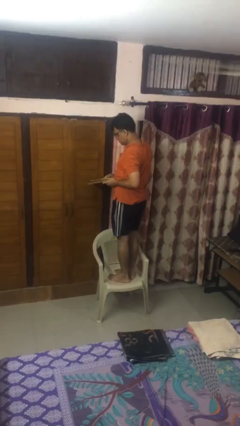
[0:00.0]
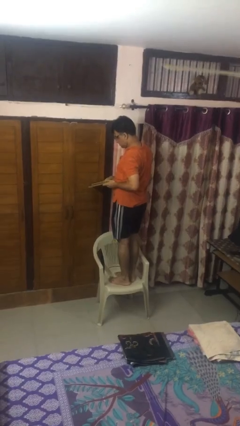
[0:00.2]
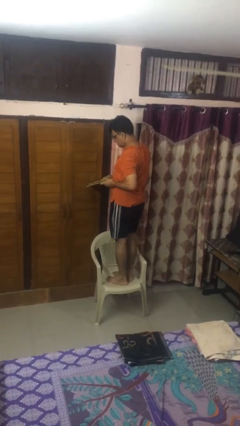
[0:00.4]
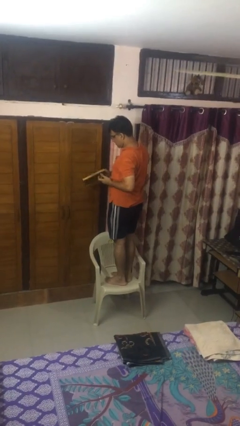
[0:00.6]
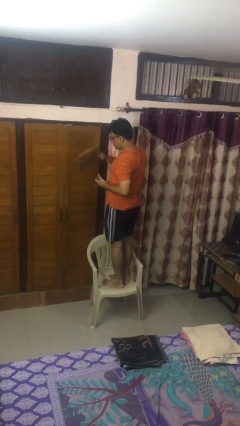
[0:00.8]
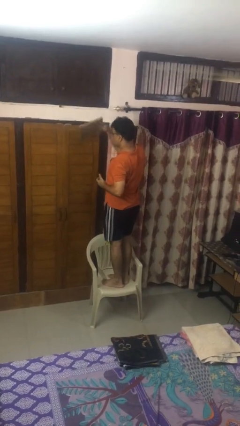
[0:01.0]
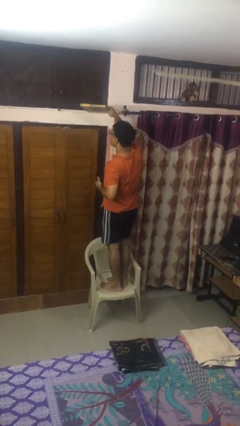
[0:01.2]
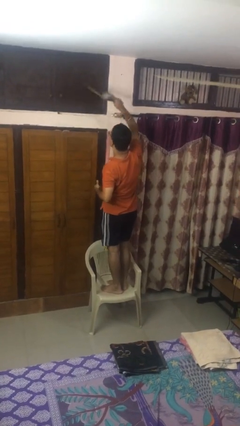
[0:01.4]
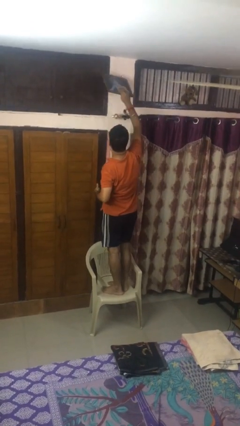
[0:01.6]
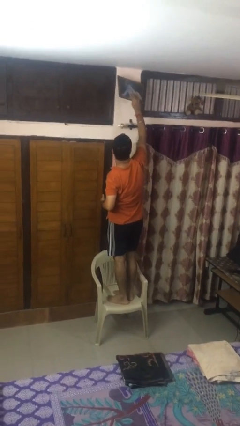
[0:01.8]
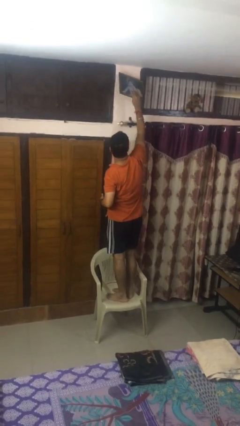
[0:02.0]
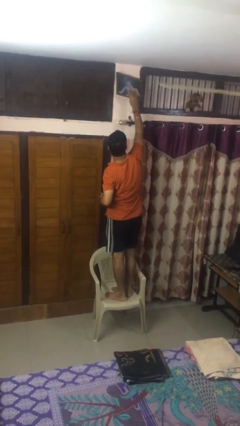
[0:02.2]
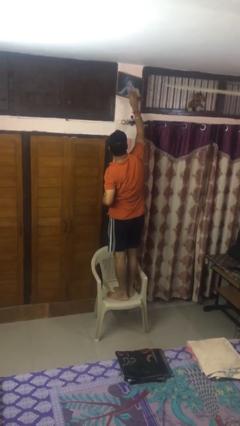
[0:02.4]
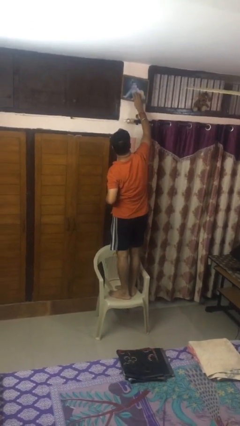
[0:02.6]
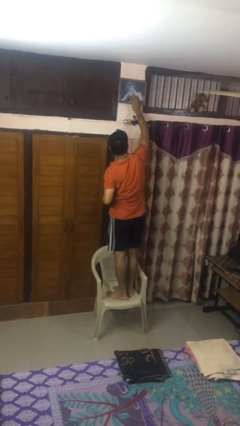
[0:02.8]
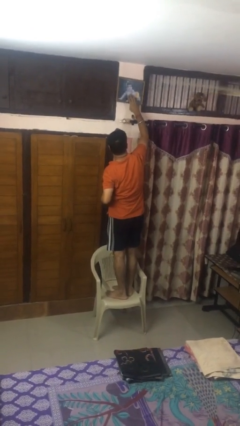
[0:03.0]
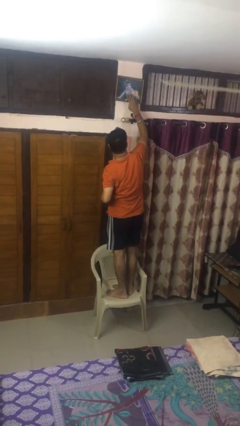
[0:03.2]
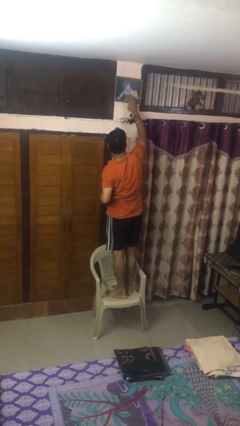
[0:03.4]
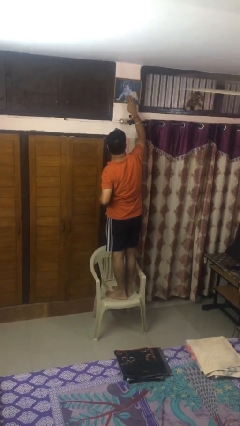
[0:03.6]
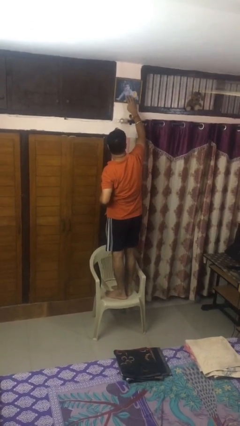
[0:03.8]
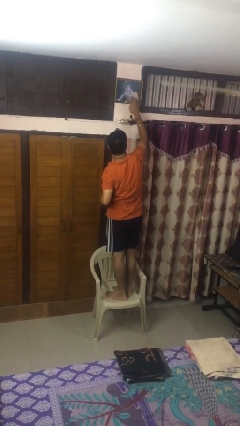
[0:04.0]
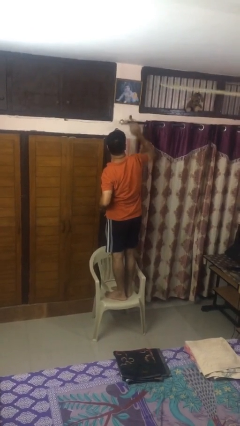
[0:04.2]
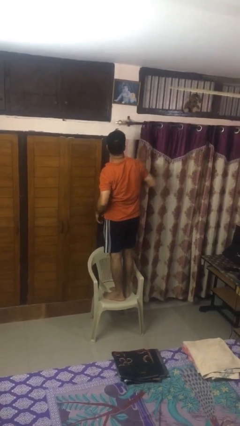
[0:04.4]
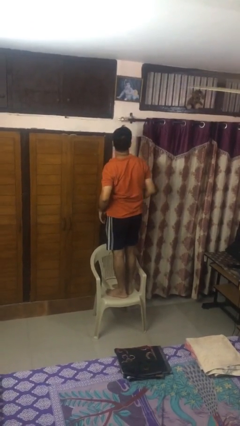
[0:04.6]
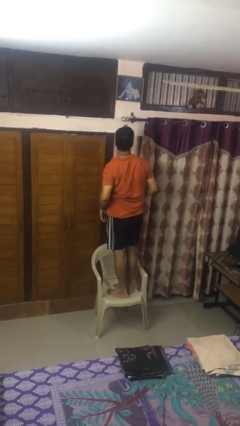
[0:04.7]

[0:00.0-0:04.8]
person puts up picture frame

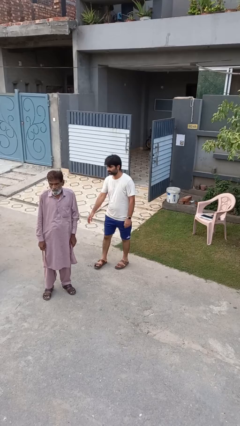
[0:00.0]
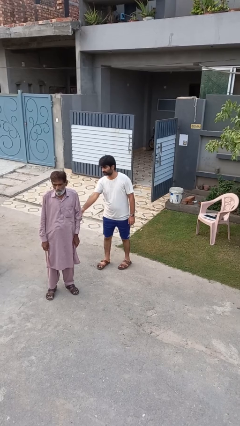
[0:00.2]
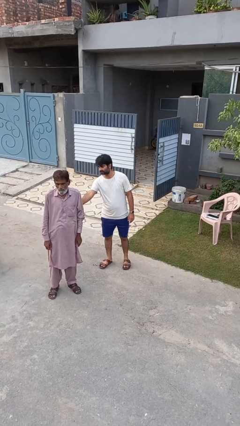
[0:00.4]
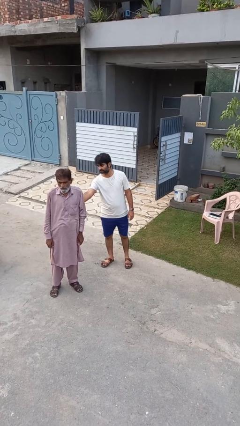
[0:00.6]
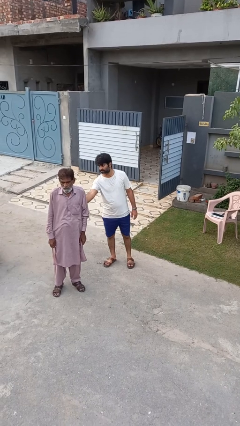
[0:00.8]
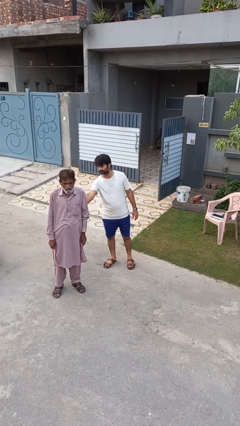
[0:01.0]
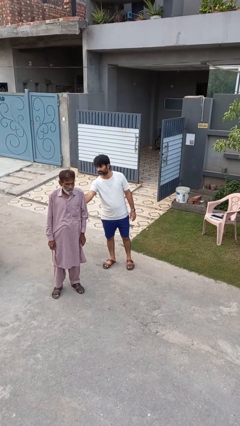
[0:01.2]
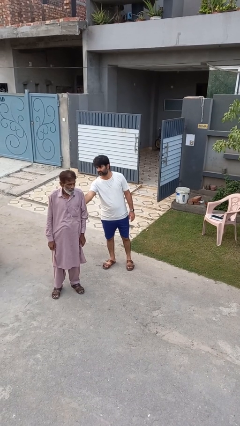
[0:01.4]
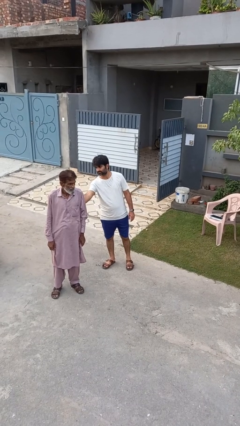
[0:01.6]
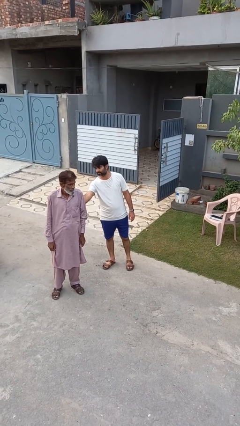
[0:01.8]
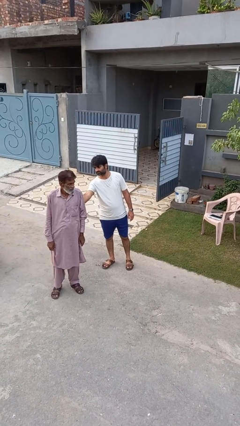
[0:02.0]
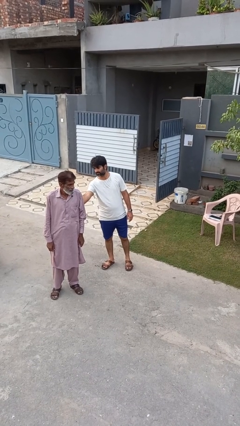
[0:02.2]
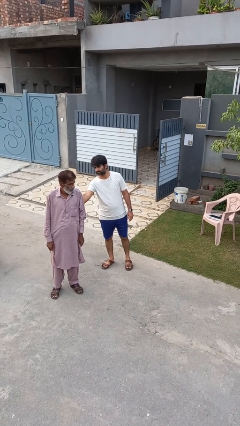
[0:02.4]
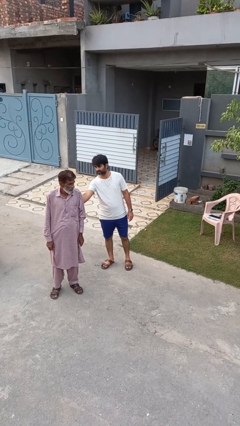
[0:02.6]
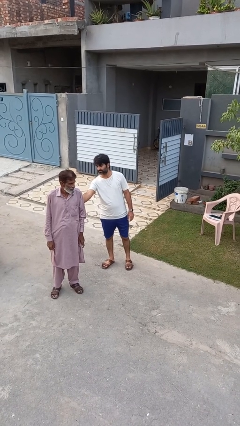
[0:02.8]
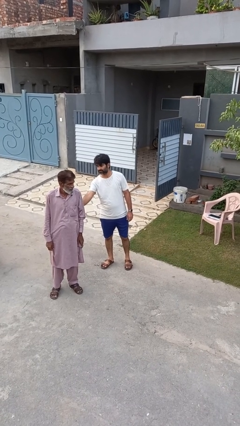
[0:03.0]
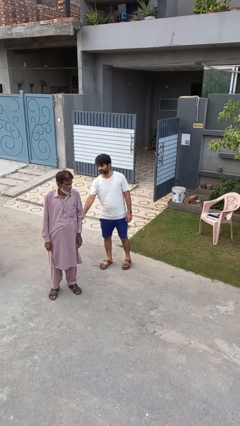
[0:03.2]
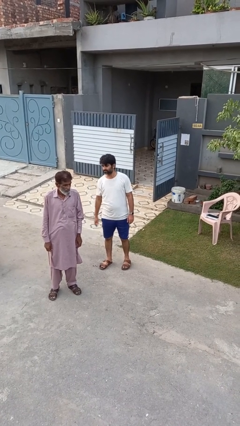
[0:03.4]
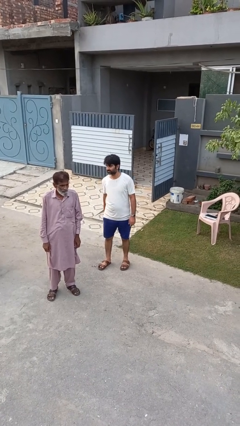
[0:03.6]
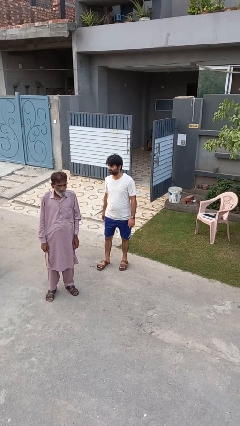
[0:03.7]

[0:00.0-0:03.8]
person touches back of person

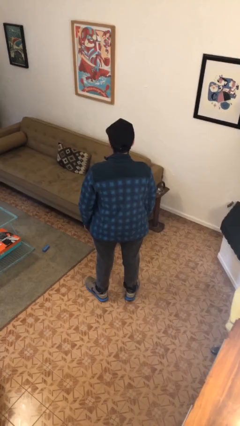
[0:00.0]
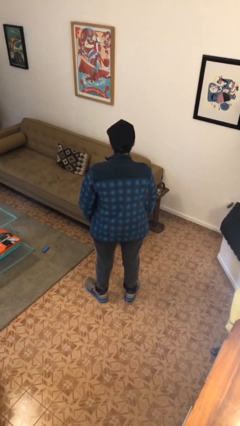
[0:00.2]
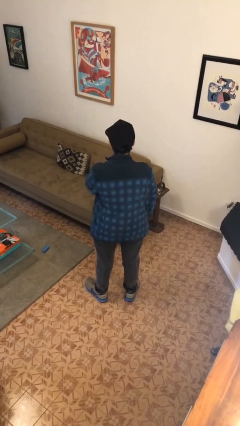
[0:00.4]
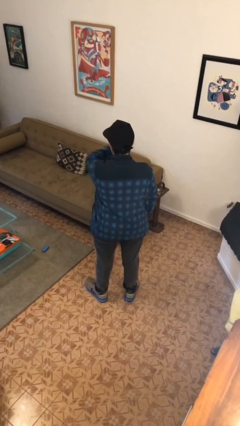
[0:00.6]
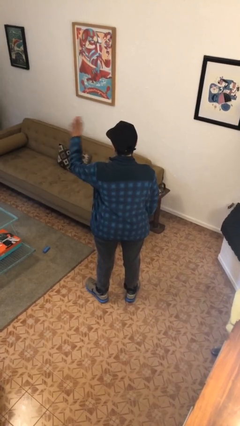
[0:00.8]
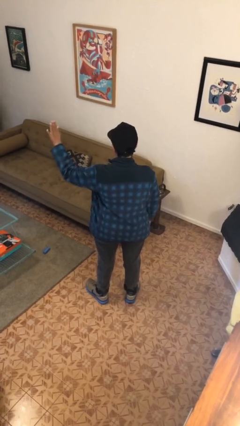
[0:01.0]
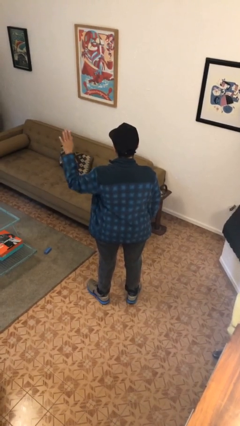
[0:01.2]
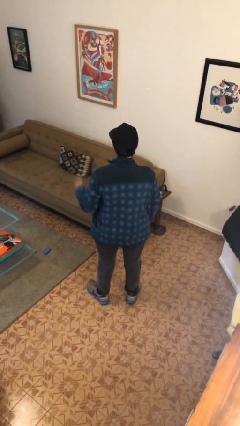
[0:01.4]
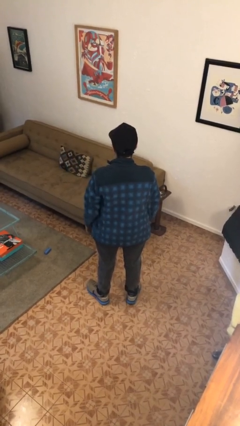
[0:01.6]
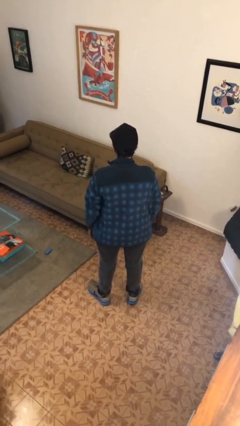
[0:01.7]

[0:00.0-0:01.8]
person gestures swipe left

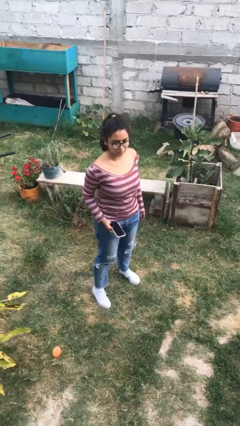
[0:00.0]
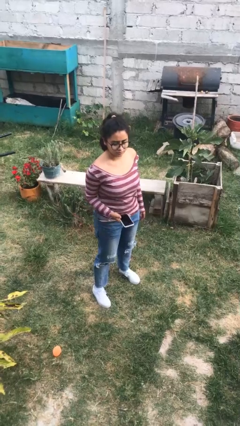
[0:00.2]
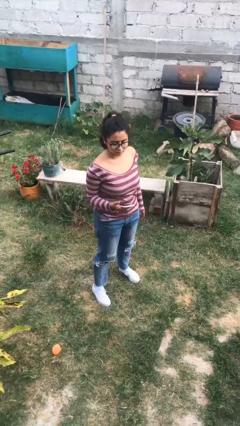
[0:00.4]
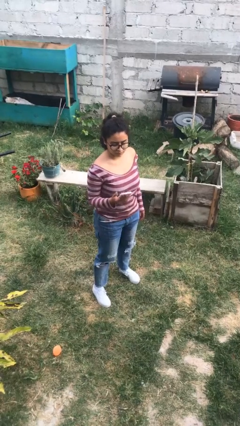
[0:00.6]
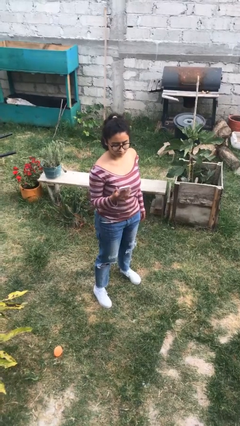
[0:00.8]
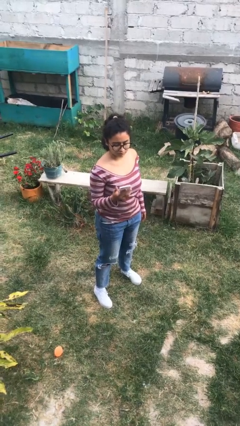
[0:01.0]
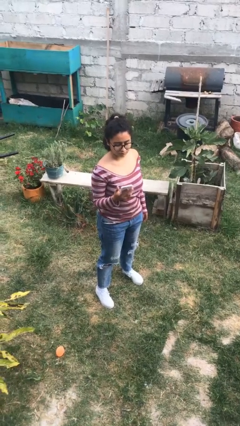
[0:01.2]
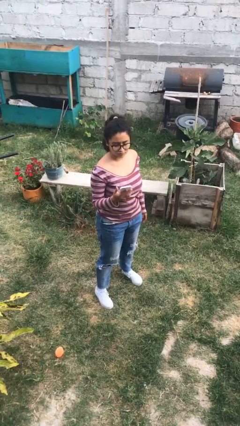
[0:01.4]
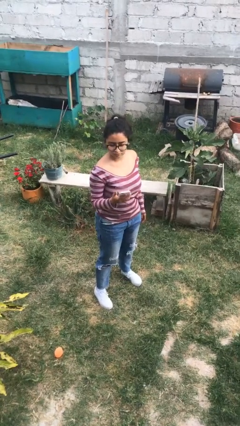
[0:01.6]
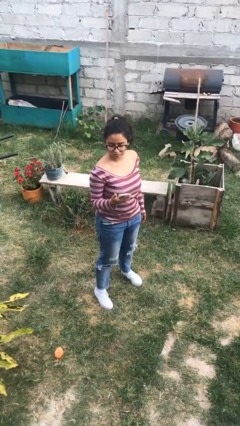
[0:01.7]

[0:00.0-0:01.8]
person puts phone into pocket

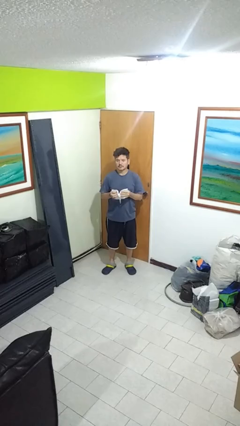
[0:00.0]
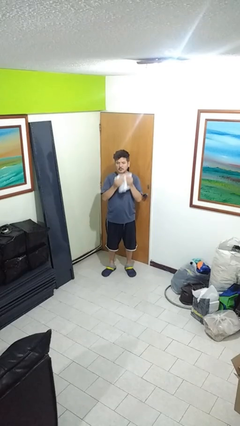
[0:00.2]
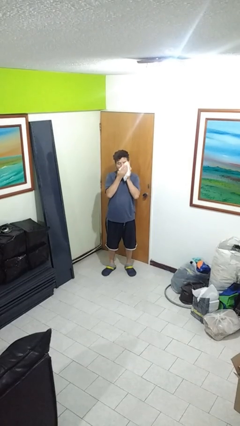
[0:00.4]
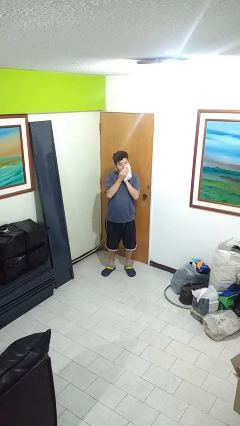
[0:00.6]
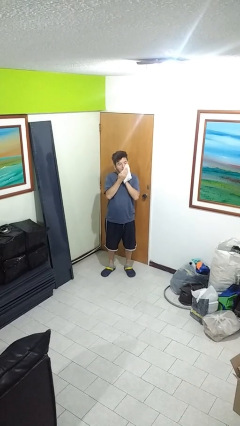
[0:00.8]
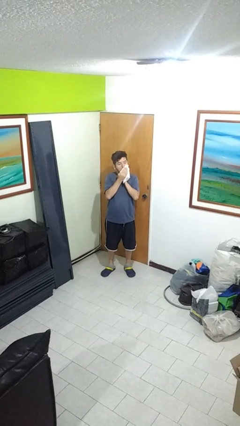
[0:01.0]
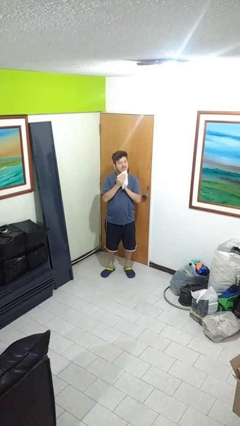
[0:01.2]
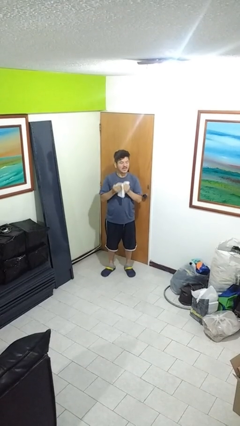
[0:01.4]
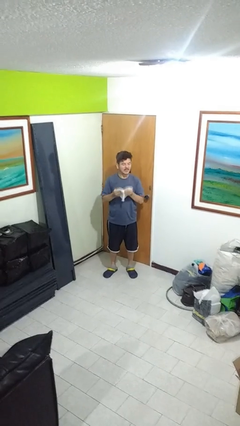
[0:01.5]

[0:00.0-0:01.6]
person wipes mouth with napkin

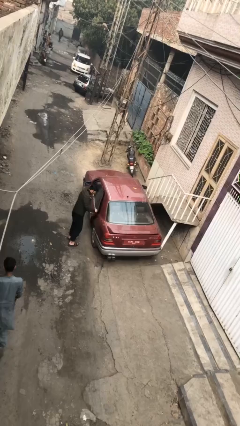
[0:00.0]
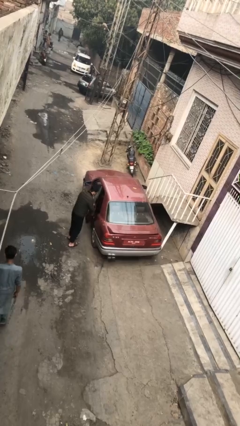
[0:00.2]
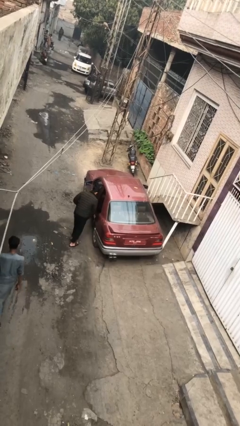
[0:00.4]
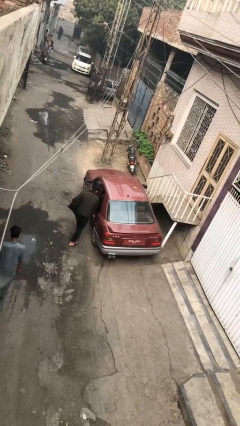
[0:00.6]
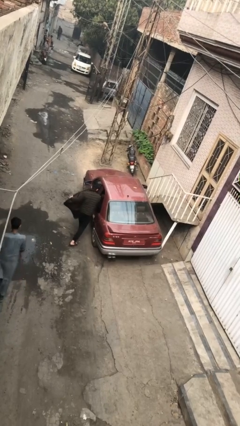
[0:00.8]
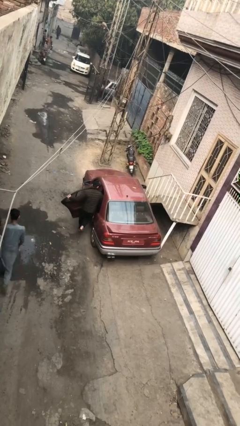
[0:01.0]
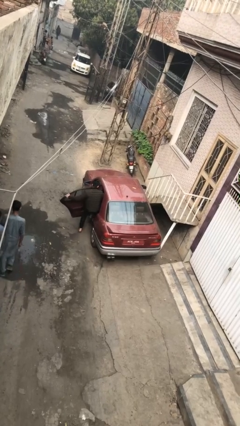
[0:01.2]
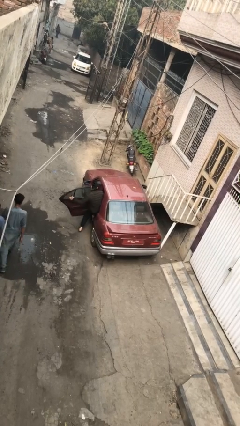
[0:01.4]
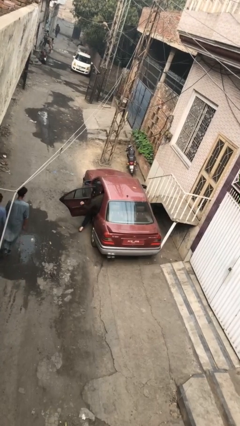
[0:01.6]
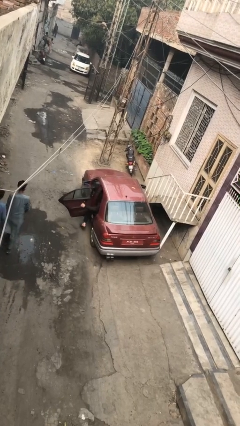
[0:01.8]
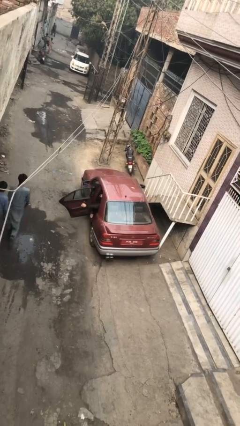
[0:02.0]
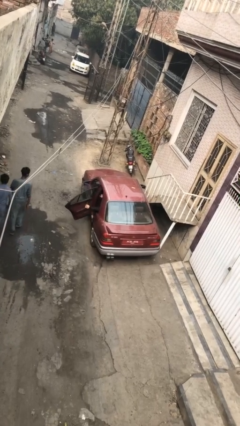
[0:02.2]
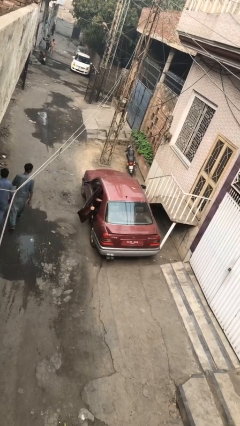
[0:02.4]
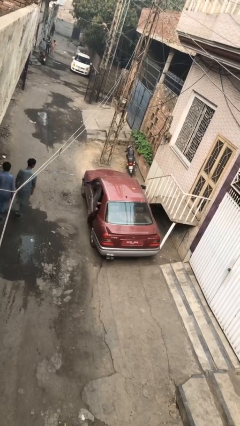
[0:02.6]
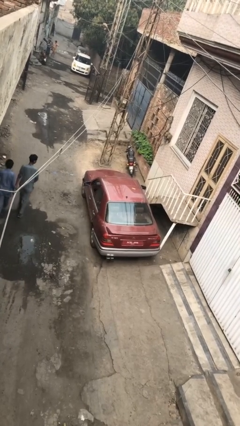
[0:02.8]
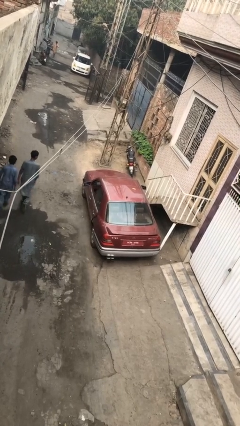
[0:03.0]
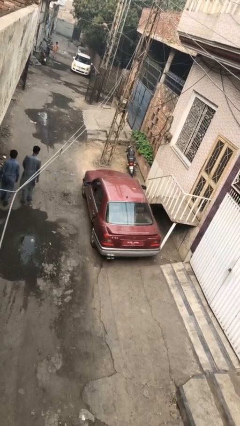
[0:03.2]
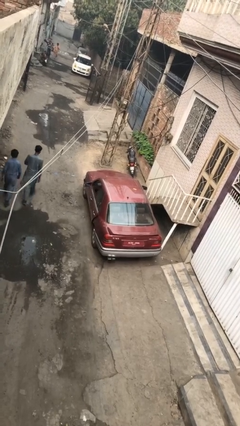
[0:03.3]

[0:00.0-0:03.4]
car picks up person

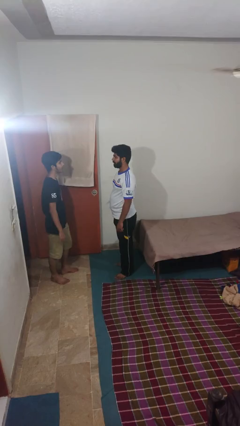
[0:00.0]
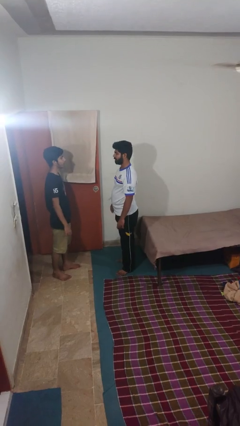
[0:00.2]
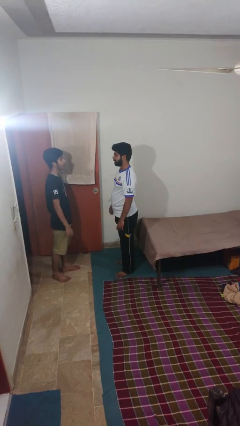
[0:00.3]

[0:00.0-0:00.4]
person puts down person
